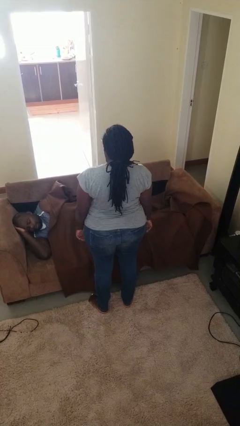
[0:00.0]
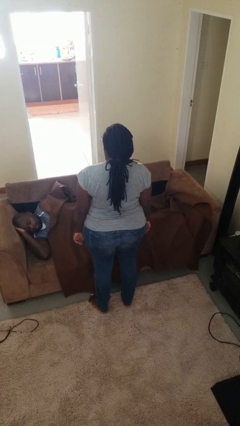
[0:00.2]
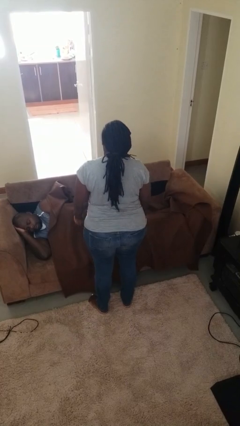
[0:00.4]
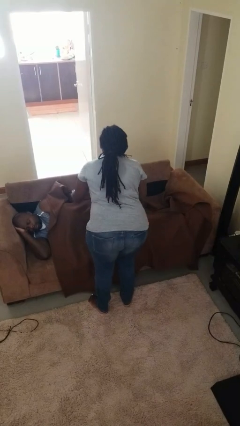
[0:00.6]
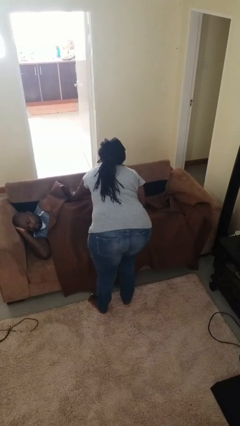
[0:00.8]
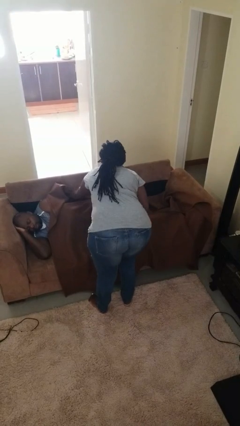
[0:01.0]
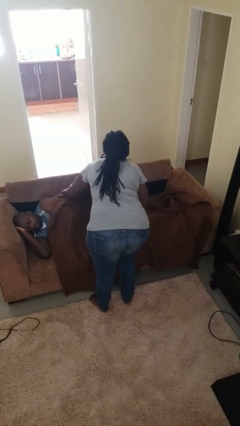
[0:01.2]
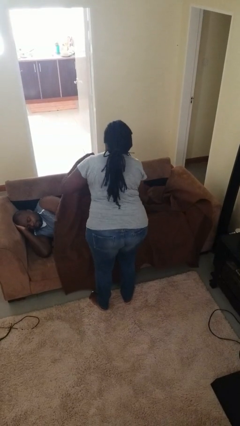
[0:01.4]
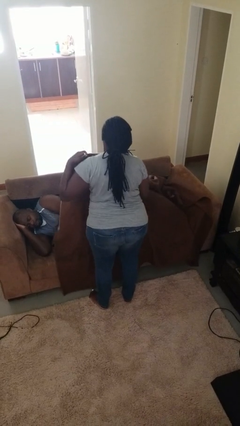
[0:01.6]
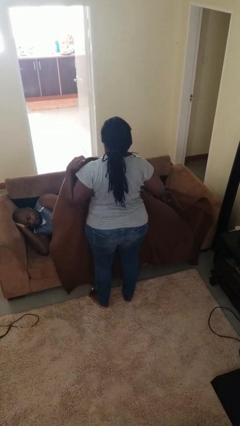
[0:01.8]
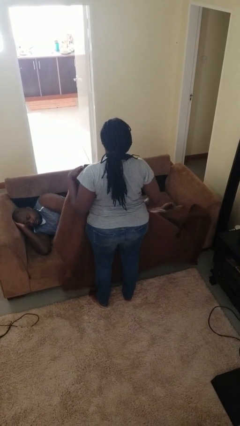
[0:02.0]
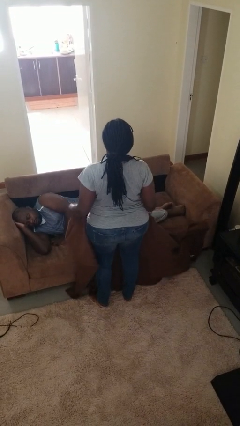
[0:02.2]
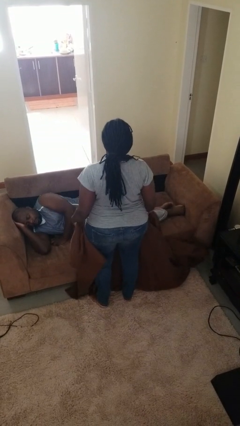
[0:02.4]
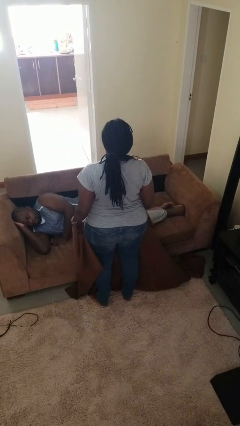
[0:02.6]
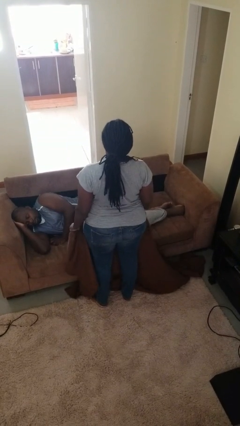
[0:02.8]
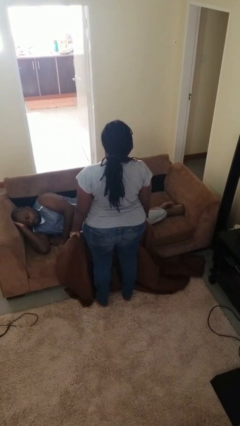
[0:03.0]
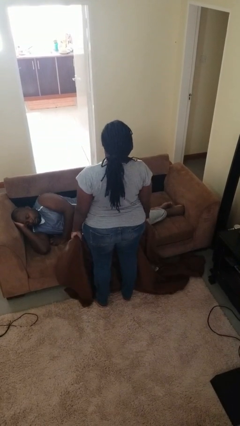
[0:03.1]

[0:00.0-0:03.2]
person uncovers friend with blanket

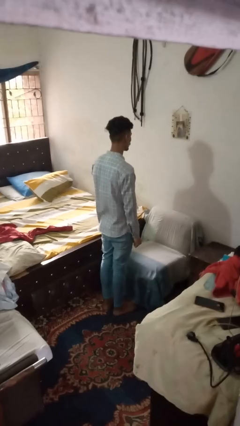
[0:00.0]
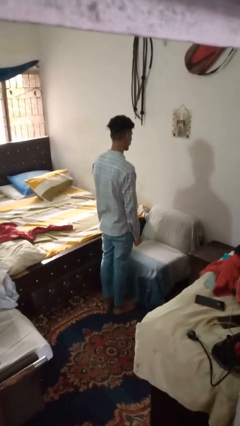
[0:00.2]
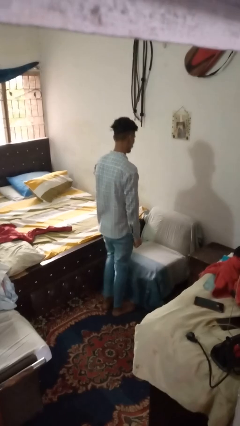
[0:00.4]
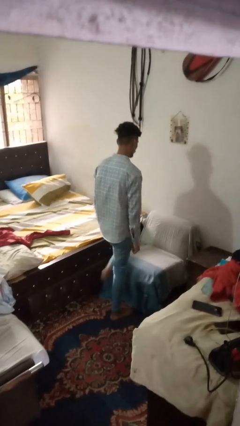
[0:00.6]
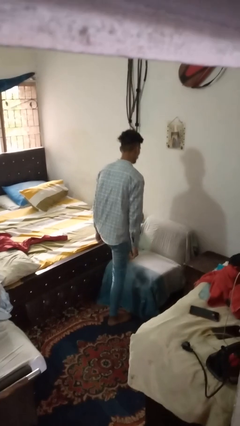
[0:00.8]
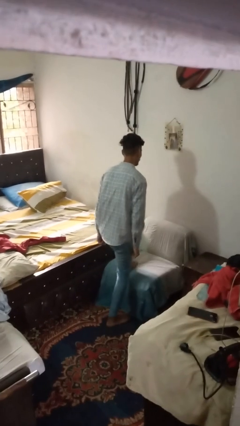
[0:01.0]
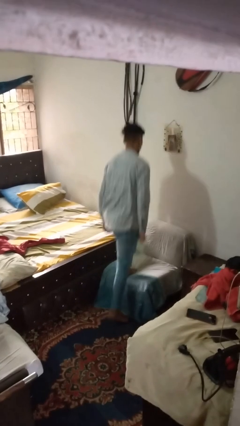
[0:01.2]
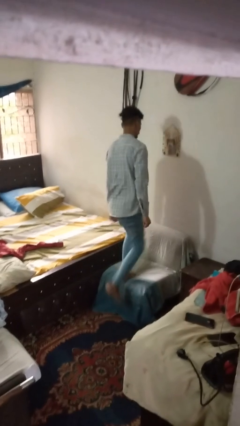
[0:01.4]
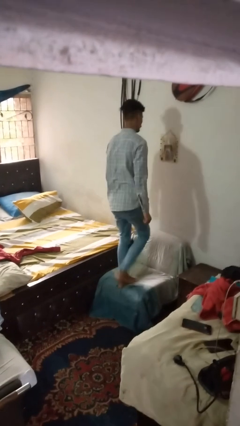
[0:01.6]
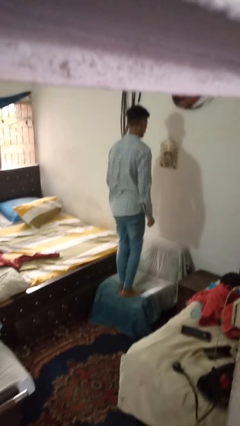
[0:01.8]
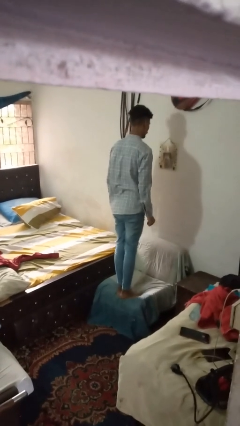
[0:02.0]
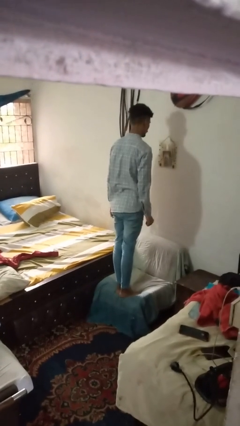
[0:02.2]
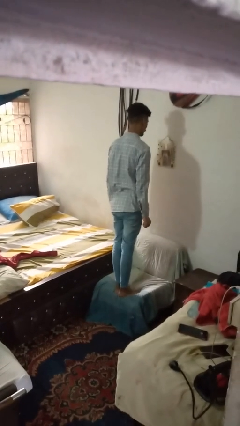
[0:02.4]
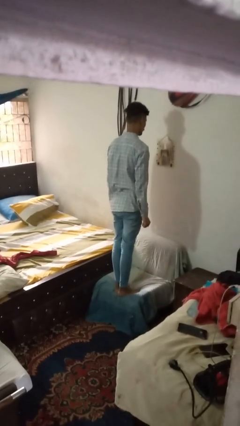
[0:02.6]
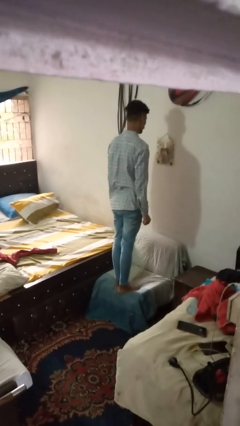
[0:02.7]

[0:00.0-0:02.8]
person climbs on couch

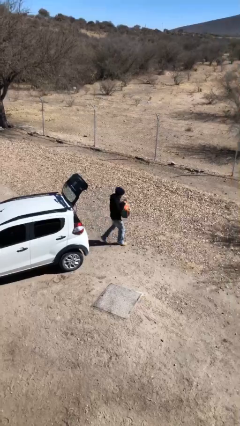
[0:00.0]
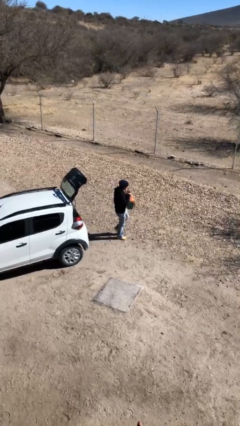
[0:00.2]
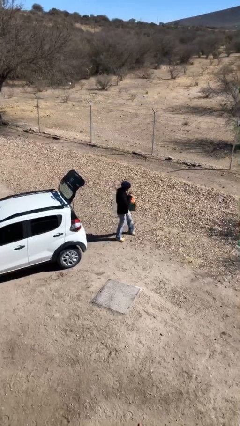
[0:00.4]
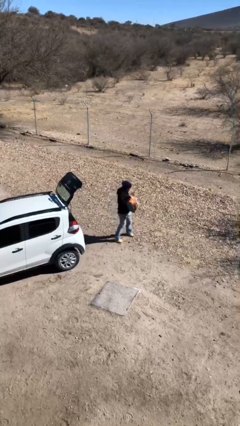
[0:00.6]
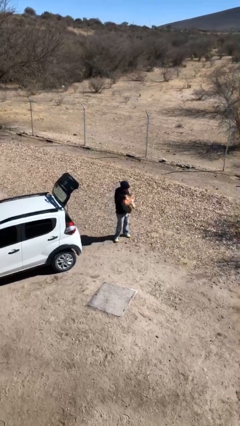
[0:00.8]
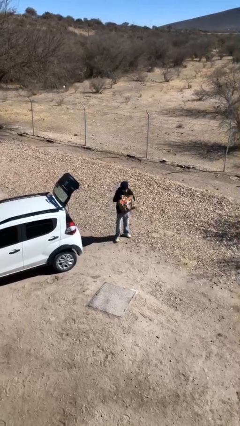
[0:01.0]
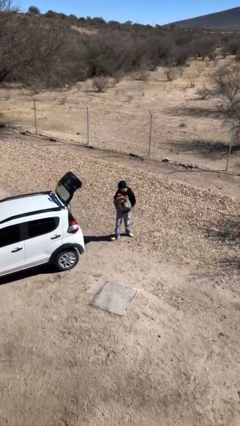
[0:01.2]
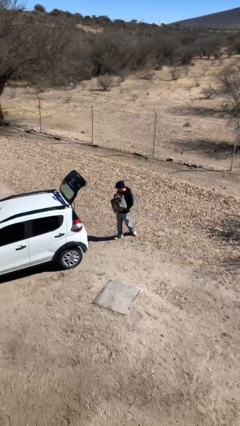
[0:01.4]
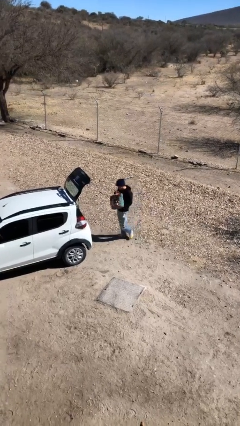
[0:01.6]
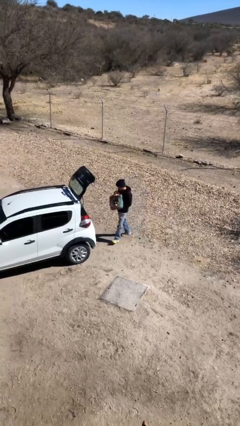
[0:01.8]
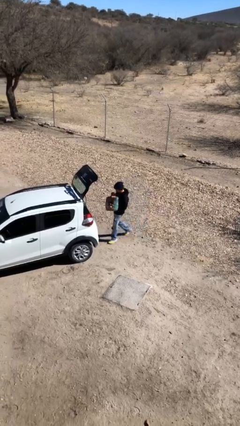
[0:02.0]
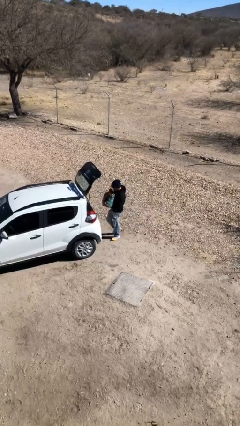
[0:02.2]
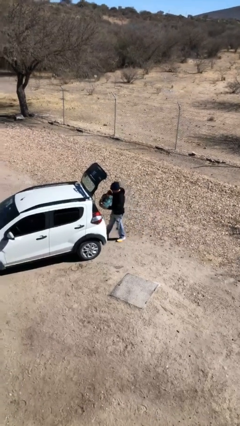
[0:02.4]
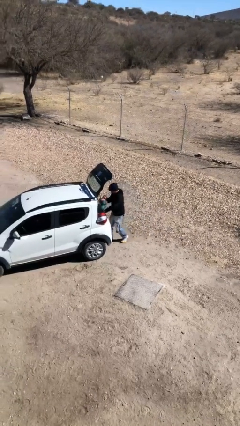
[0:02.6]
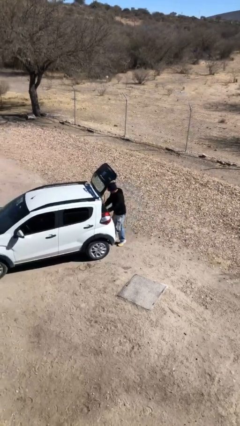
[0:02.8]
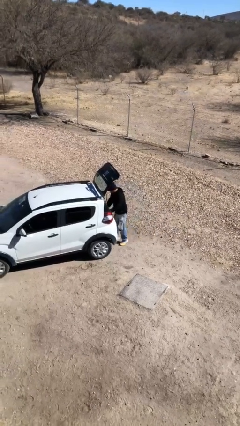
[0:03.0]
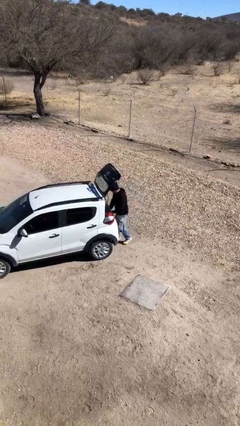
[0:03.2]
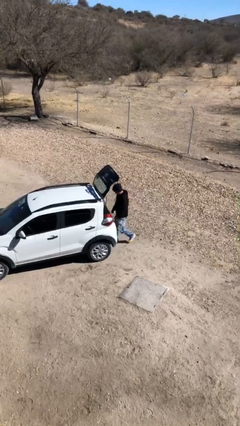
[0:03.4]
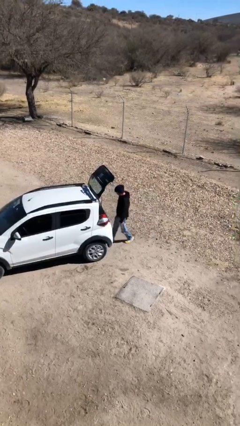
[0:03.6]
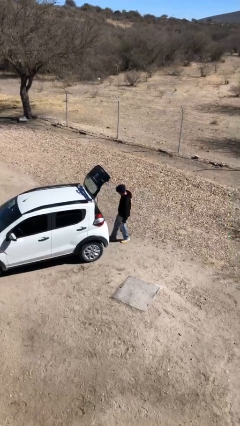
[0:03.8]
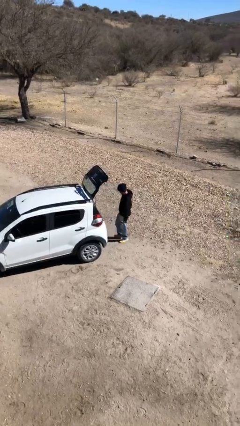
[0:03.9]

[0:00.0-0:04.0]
person loads car

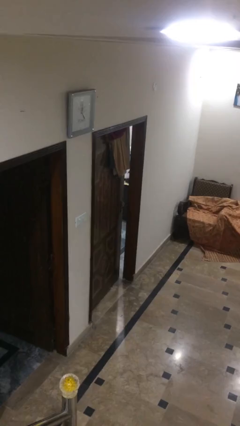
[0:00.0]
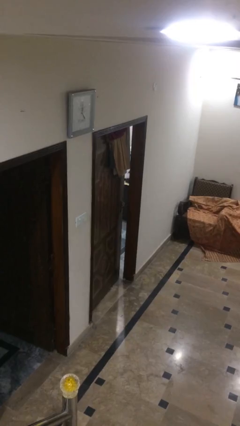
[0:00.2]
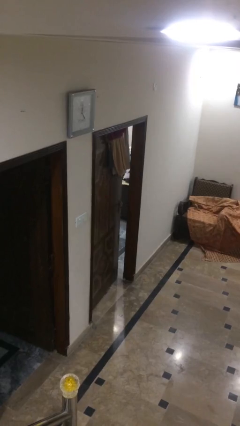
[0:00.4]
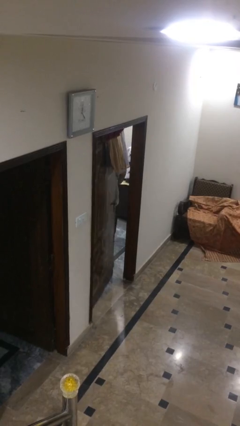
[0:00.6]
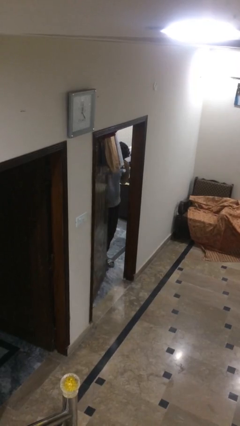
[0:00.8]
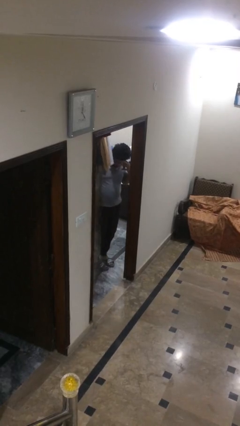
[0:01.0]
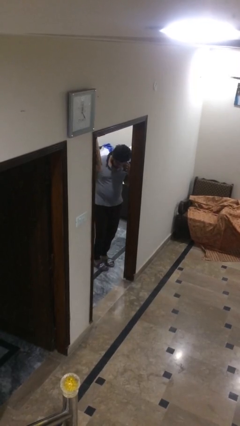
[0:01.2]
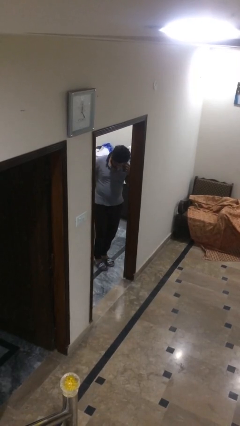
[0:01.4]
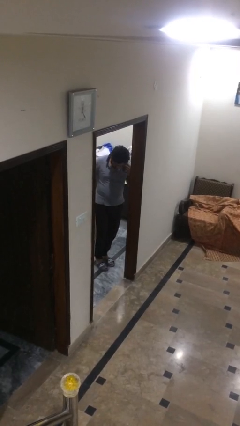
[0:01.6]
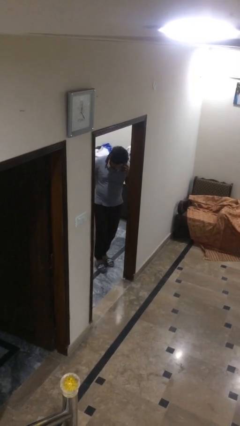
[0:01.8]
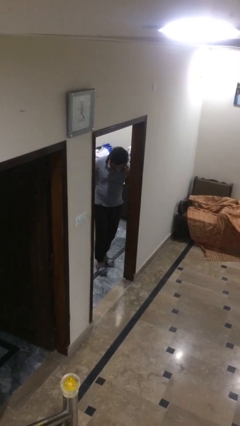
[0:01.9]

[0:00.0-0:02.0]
person opens facility door

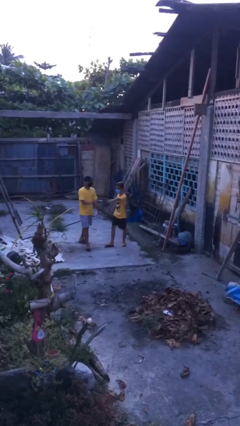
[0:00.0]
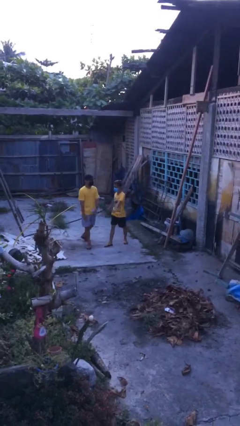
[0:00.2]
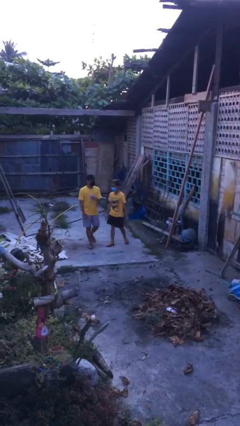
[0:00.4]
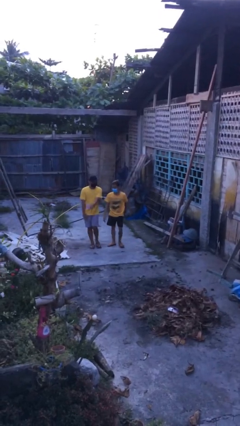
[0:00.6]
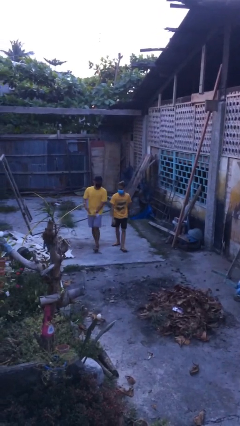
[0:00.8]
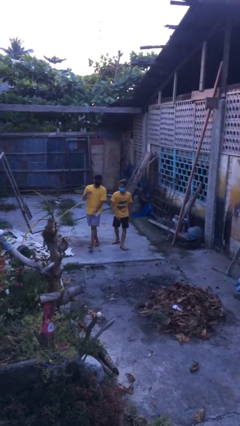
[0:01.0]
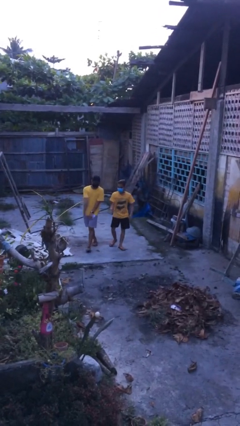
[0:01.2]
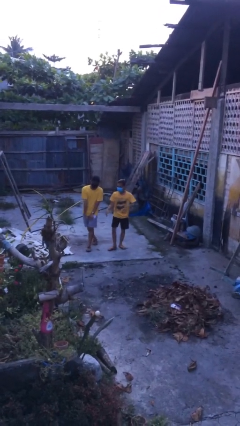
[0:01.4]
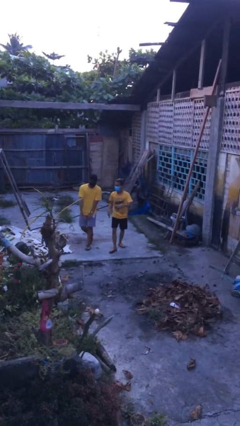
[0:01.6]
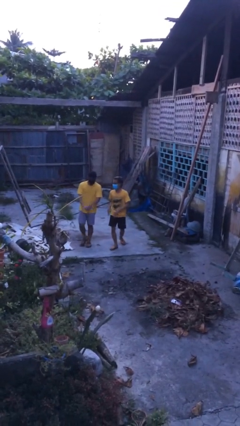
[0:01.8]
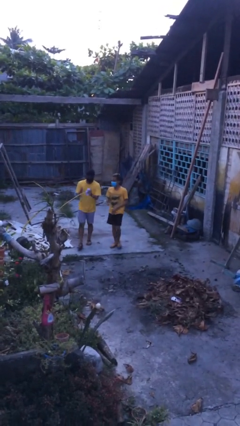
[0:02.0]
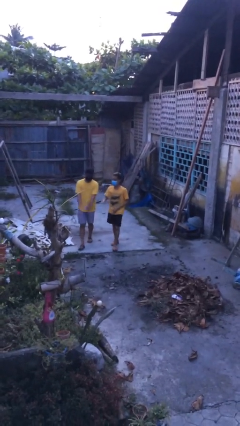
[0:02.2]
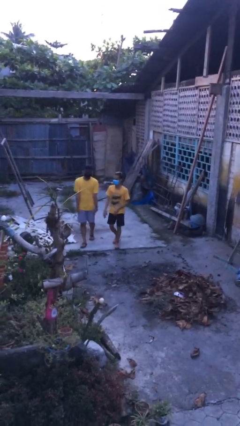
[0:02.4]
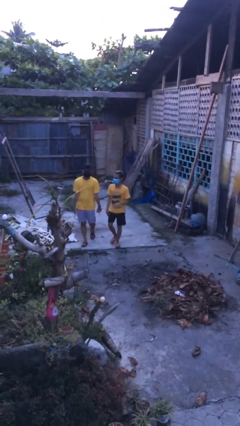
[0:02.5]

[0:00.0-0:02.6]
person talks to person

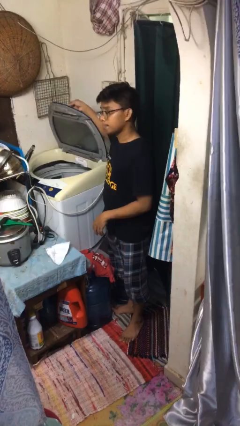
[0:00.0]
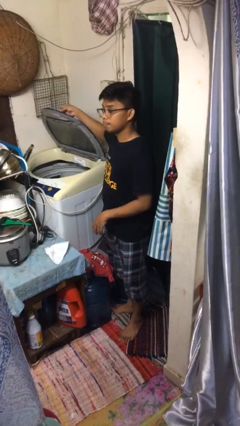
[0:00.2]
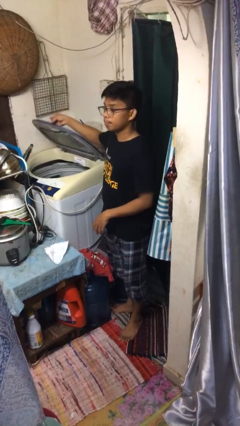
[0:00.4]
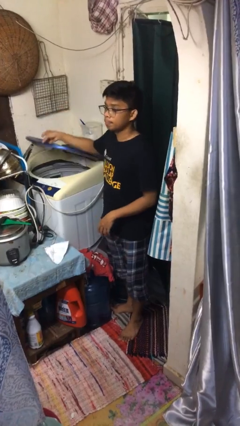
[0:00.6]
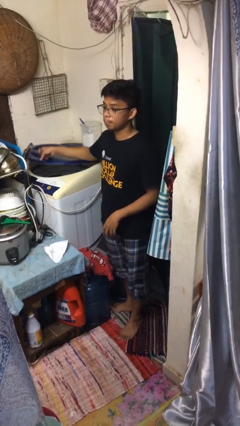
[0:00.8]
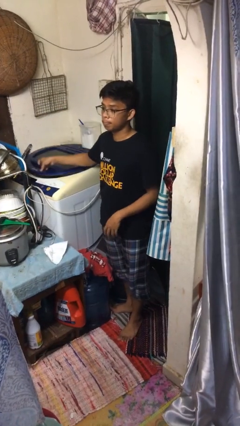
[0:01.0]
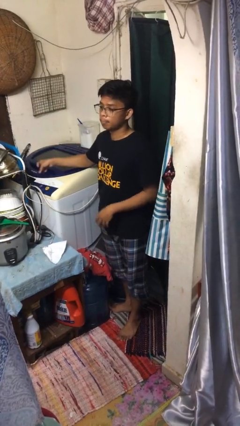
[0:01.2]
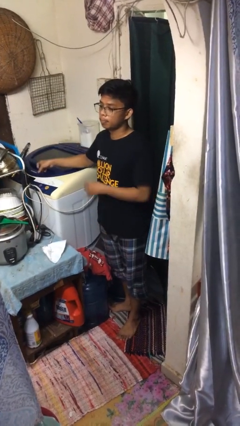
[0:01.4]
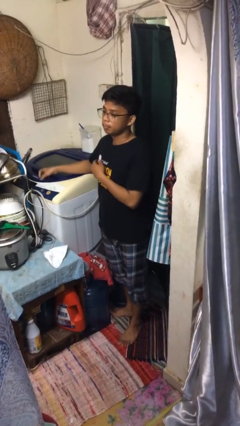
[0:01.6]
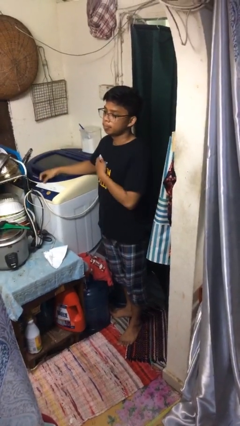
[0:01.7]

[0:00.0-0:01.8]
person closes clothes washer

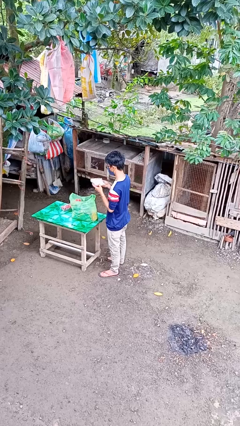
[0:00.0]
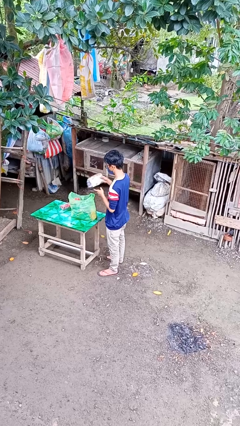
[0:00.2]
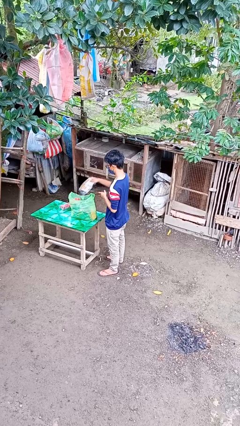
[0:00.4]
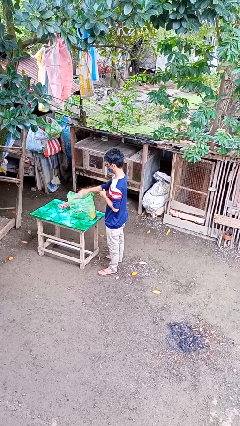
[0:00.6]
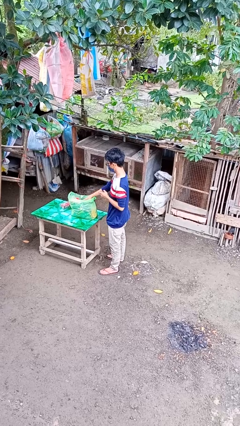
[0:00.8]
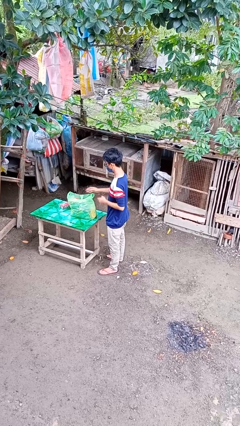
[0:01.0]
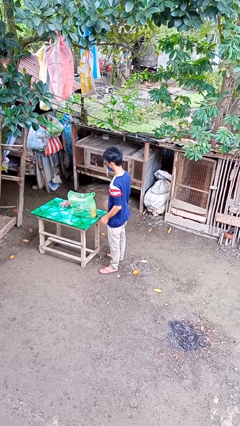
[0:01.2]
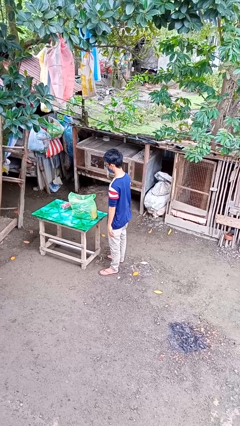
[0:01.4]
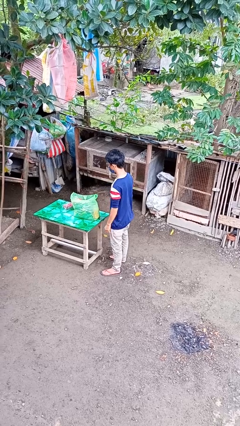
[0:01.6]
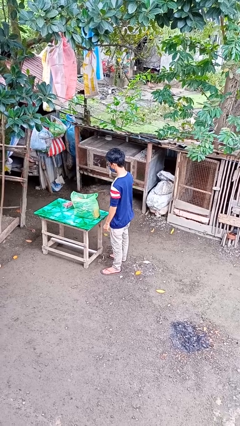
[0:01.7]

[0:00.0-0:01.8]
person puts object into bag
